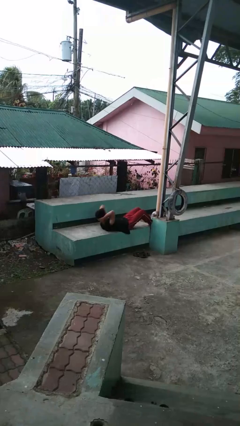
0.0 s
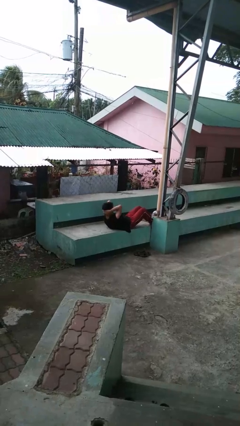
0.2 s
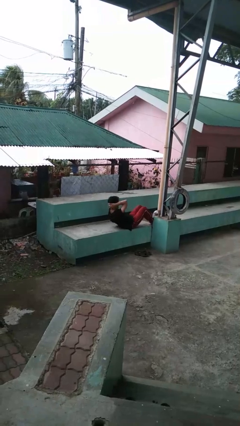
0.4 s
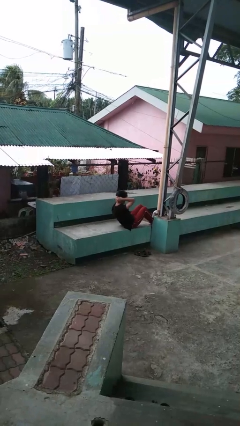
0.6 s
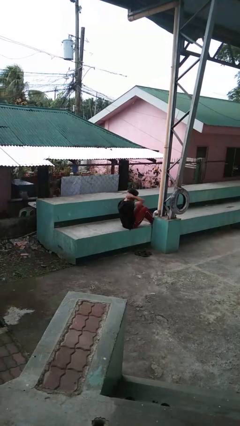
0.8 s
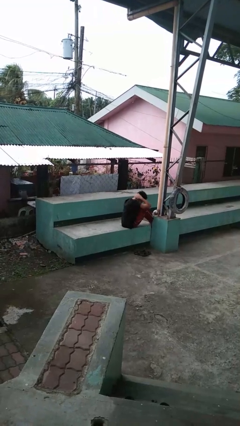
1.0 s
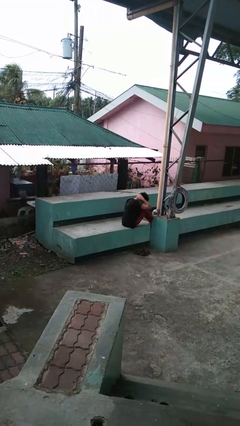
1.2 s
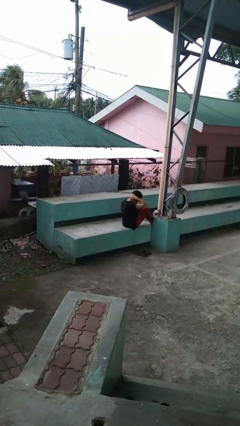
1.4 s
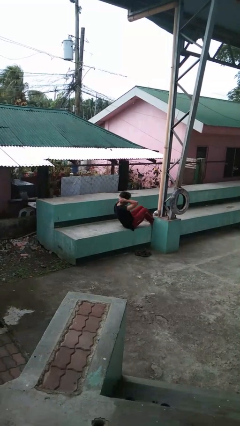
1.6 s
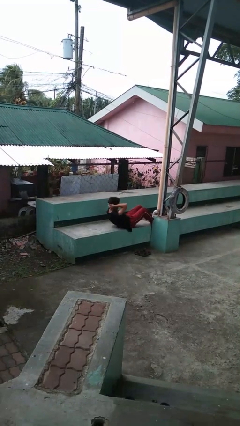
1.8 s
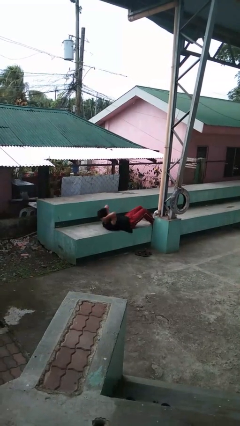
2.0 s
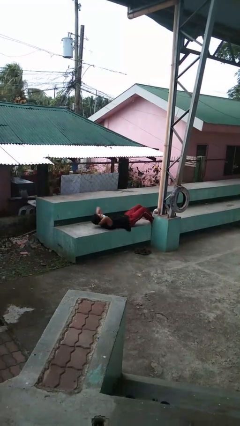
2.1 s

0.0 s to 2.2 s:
person exercises with situp

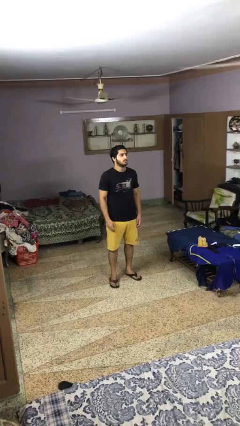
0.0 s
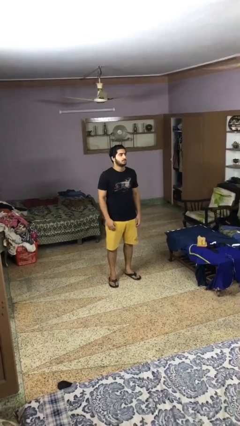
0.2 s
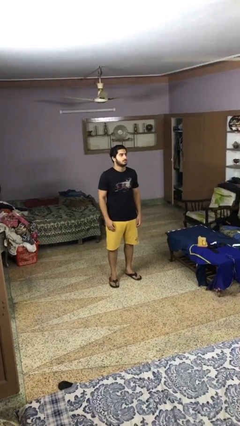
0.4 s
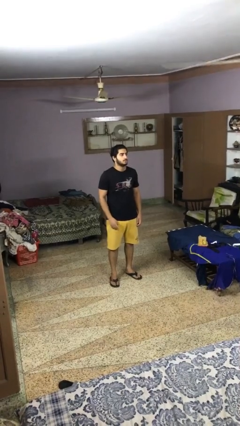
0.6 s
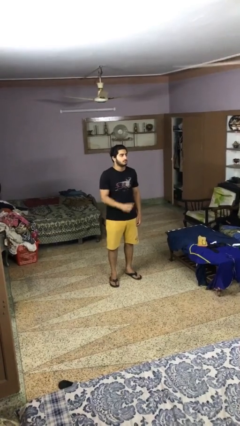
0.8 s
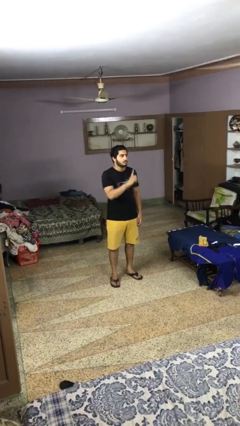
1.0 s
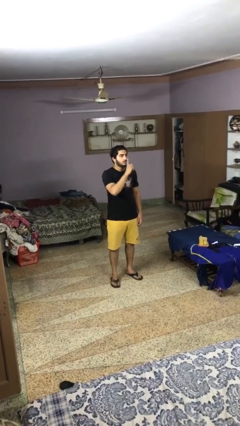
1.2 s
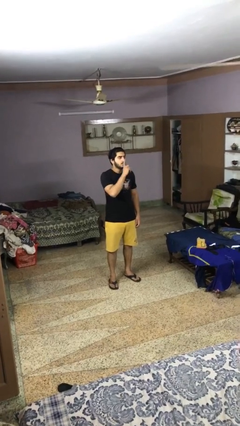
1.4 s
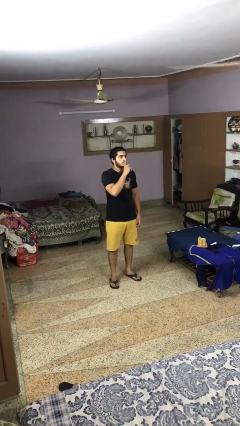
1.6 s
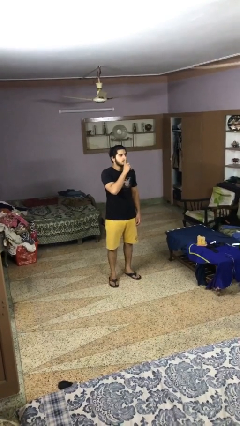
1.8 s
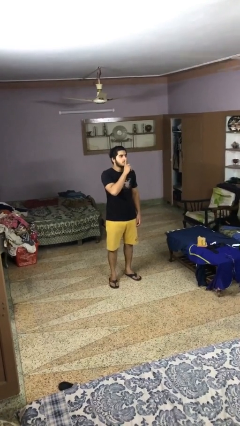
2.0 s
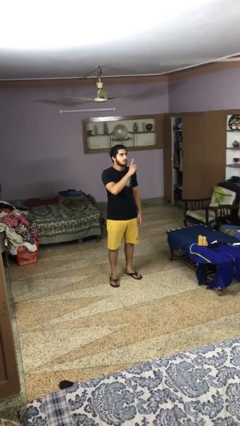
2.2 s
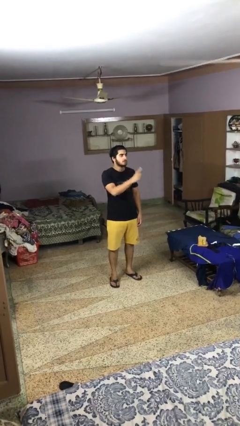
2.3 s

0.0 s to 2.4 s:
person gestures be quiet

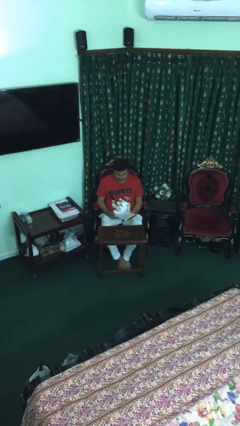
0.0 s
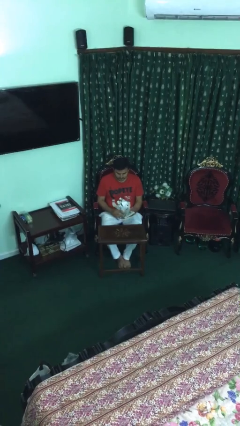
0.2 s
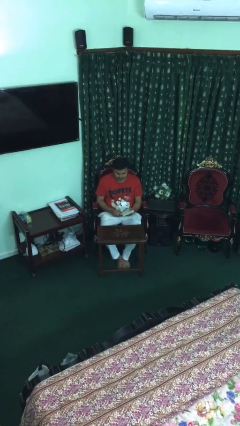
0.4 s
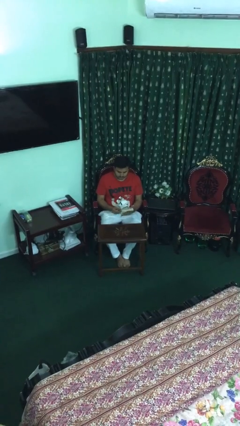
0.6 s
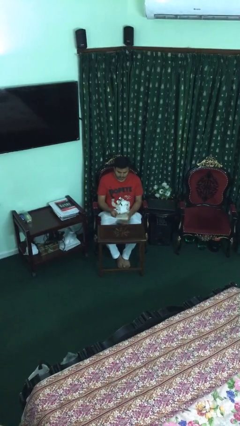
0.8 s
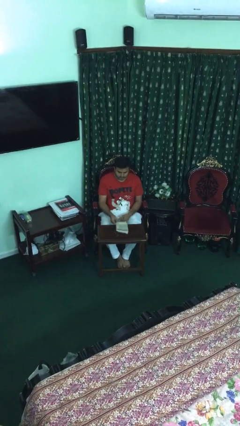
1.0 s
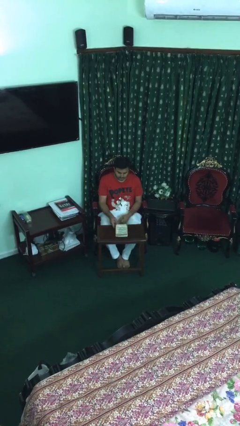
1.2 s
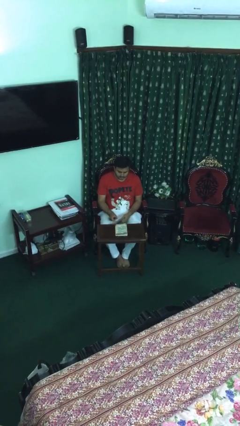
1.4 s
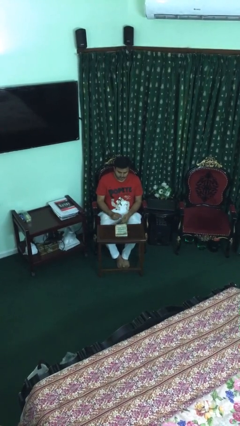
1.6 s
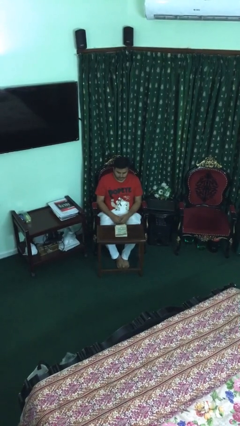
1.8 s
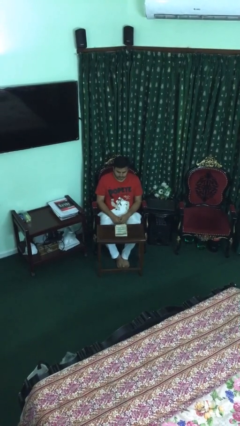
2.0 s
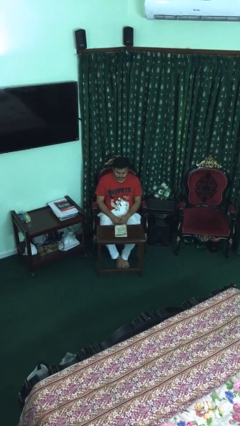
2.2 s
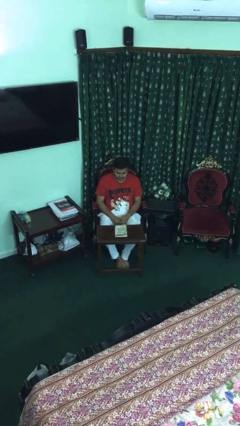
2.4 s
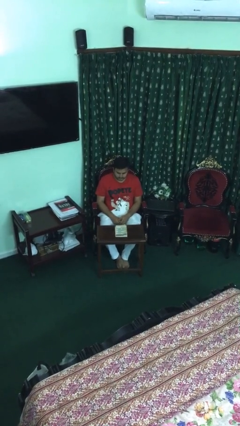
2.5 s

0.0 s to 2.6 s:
person puts down object on table

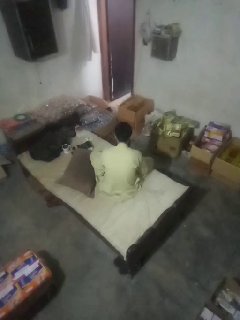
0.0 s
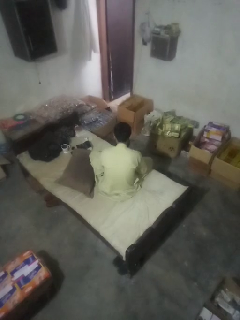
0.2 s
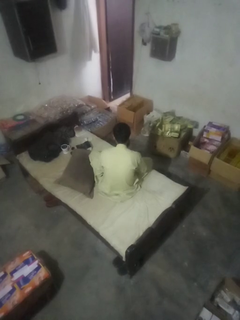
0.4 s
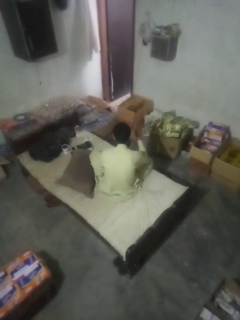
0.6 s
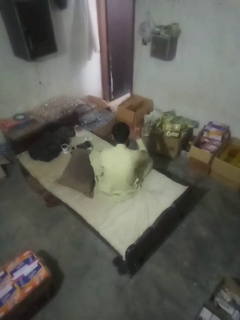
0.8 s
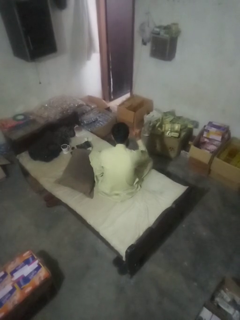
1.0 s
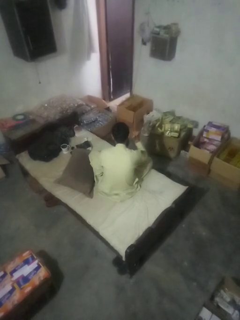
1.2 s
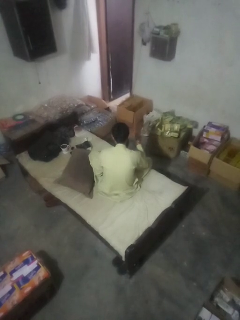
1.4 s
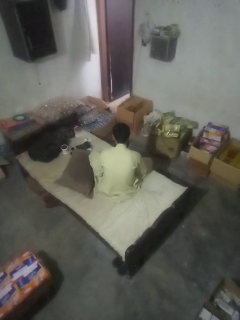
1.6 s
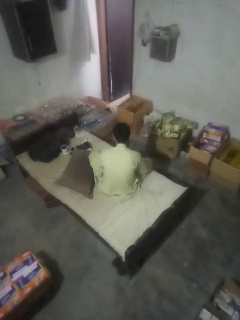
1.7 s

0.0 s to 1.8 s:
person gestures behind me

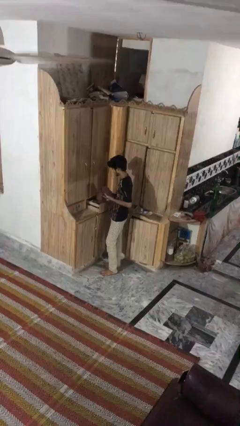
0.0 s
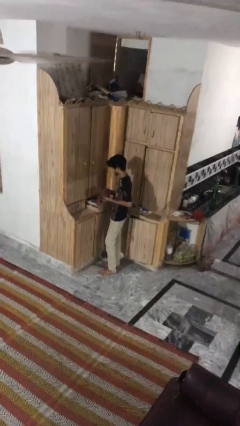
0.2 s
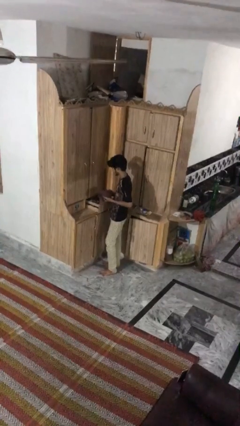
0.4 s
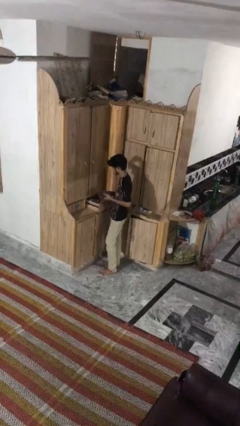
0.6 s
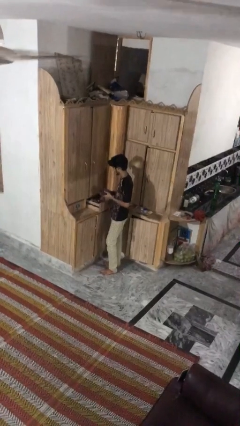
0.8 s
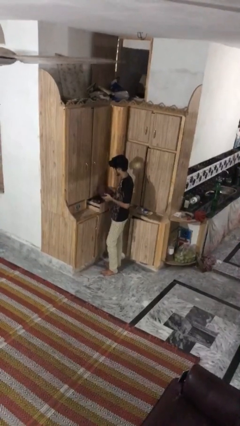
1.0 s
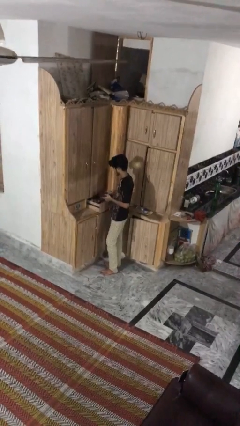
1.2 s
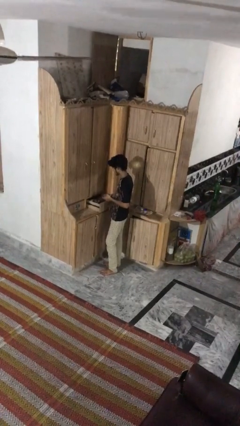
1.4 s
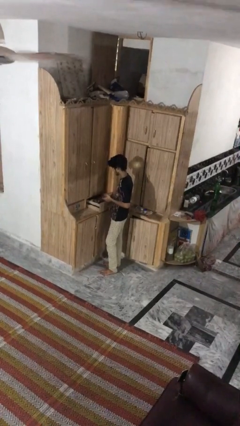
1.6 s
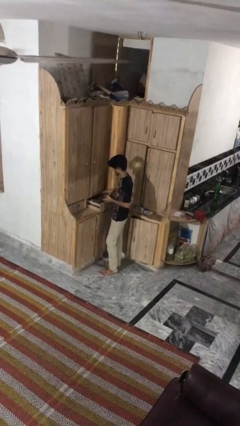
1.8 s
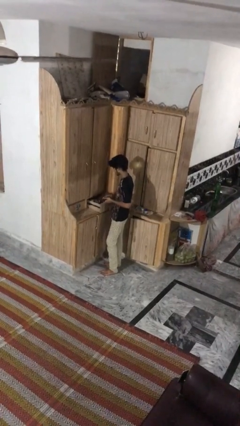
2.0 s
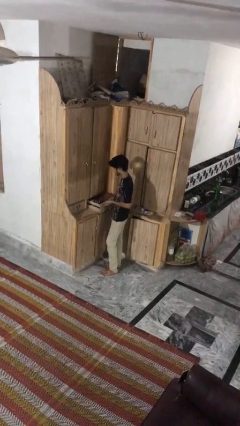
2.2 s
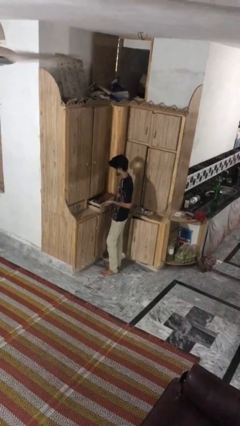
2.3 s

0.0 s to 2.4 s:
person puts clothes into dresser

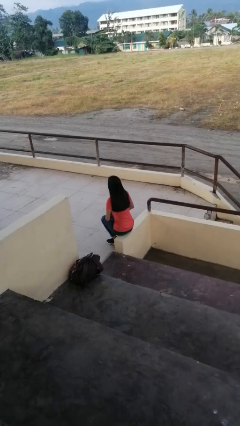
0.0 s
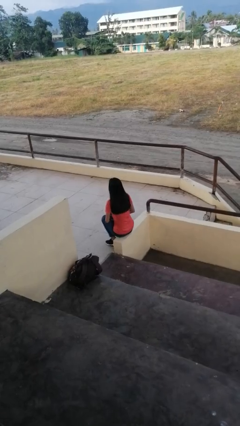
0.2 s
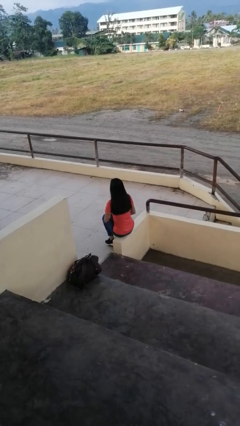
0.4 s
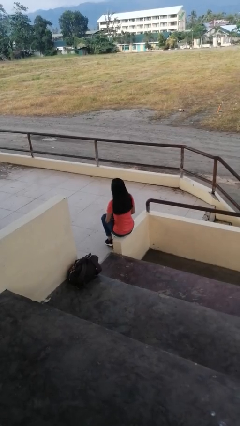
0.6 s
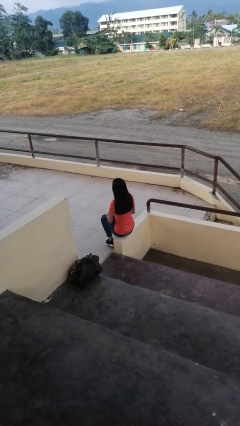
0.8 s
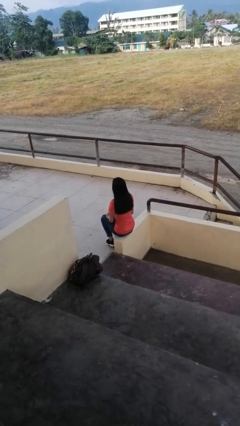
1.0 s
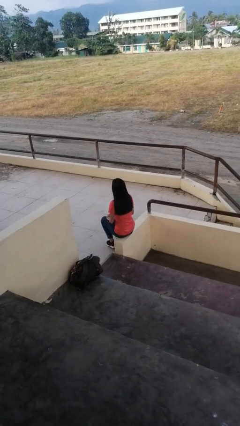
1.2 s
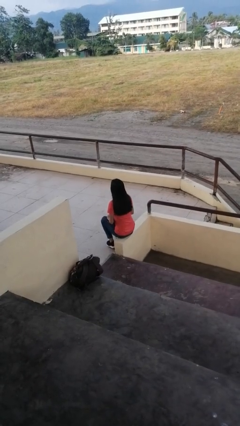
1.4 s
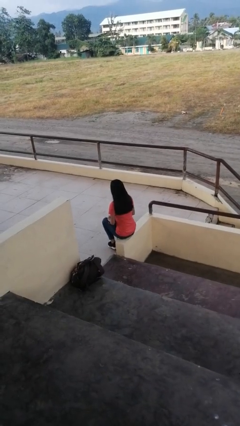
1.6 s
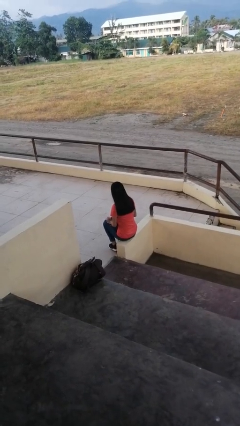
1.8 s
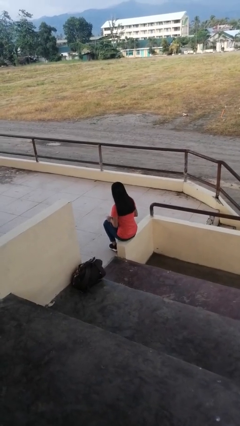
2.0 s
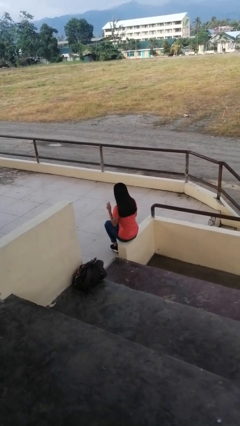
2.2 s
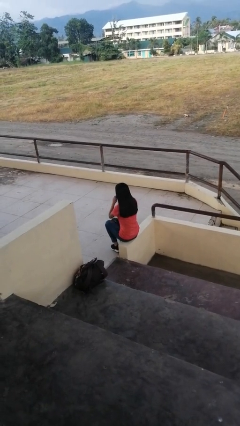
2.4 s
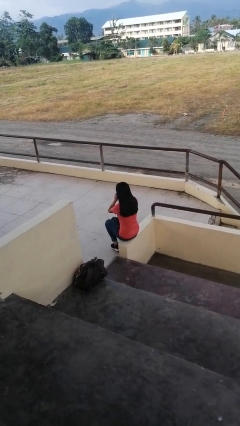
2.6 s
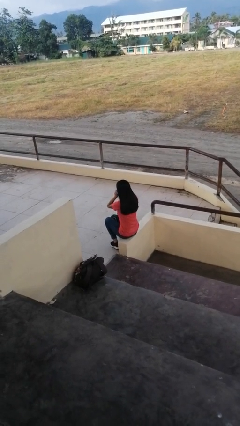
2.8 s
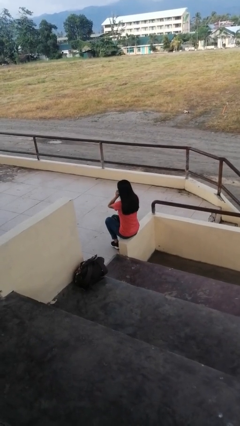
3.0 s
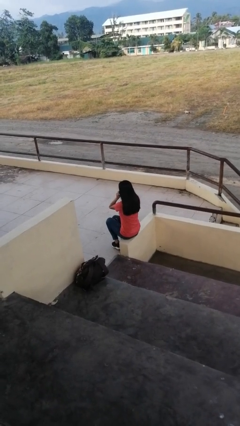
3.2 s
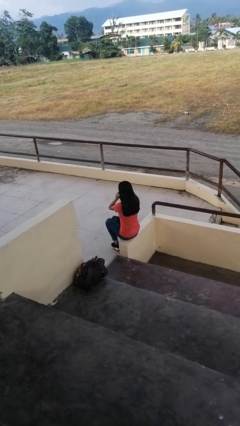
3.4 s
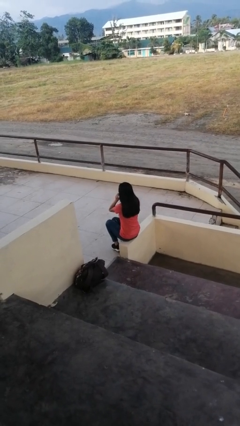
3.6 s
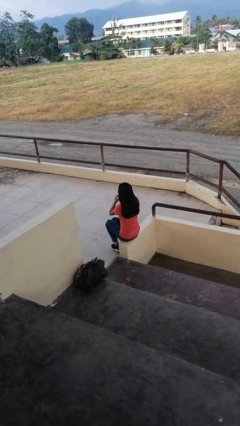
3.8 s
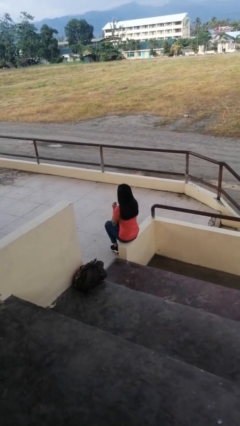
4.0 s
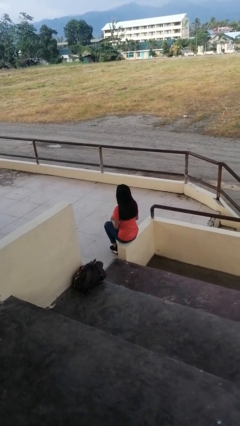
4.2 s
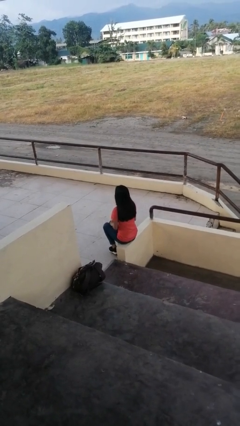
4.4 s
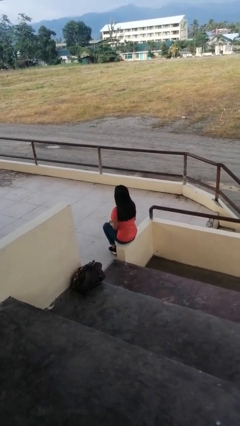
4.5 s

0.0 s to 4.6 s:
person puts on headphones

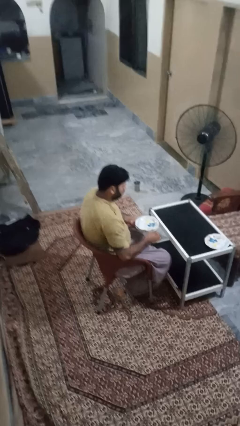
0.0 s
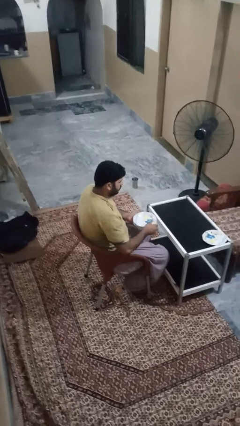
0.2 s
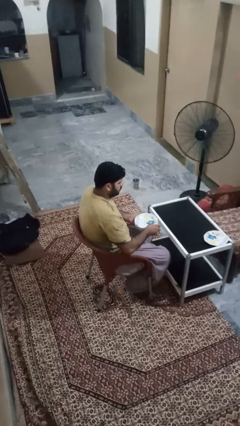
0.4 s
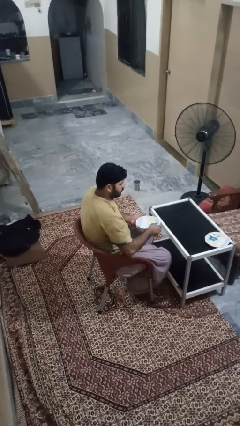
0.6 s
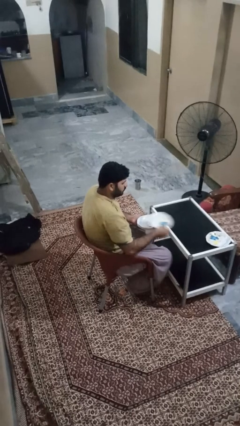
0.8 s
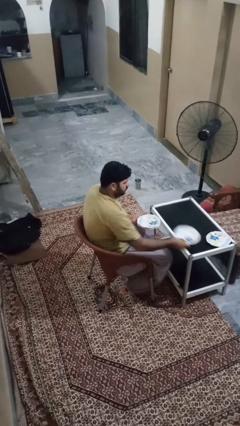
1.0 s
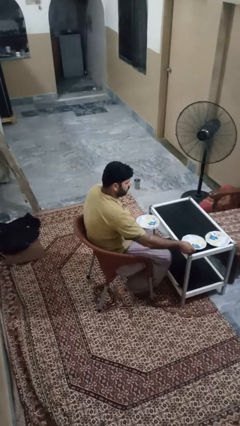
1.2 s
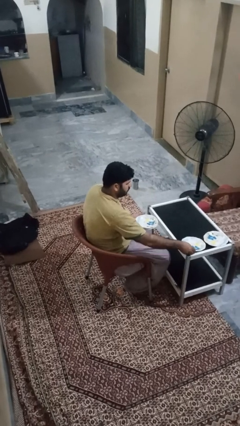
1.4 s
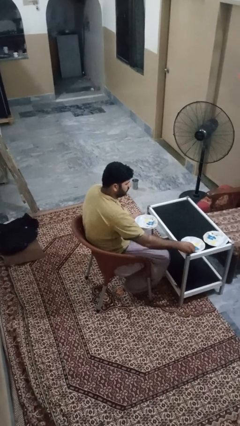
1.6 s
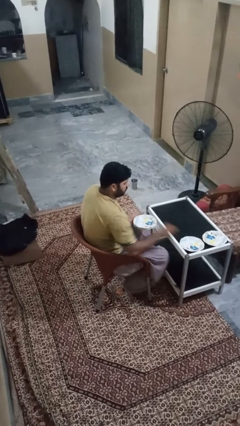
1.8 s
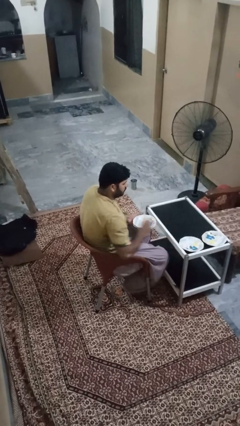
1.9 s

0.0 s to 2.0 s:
person sets table
